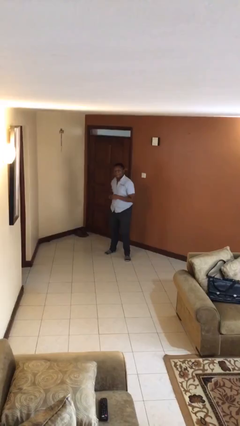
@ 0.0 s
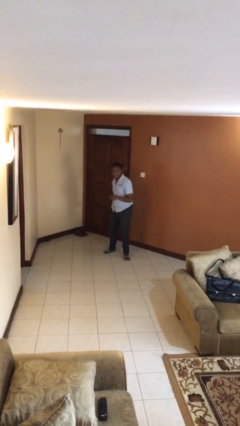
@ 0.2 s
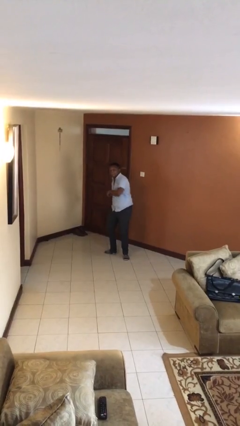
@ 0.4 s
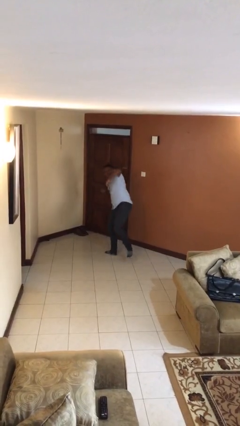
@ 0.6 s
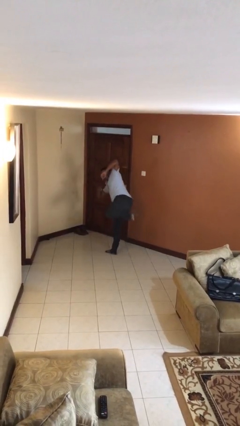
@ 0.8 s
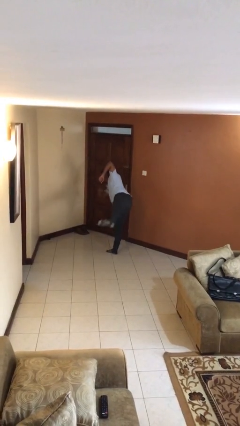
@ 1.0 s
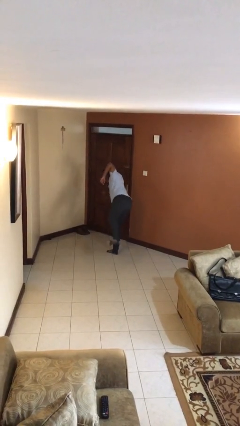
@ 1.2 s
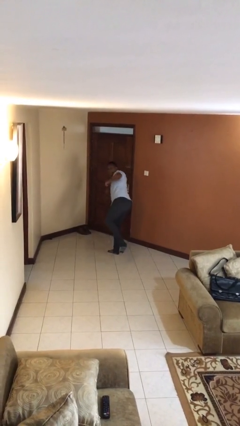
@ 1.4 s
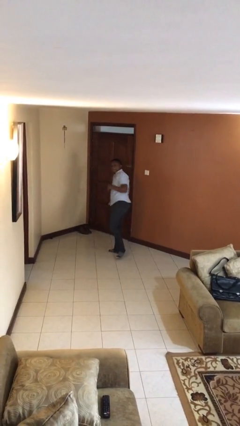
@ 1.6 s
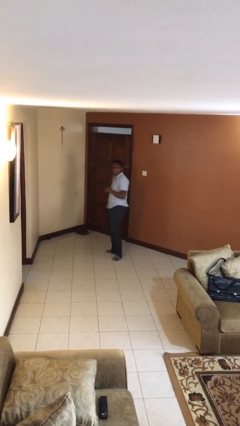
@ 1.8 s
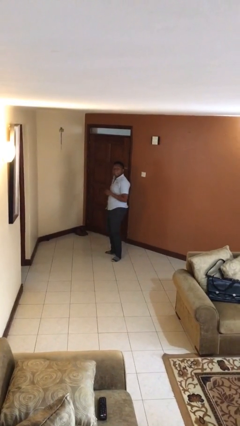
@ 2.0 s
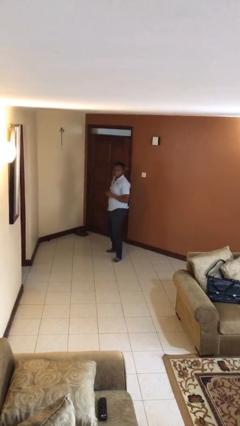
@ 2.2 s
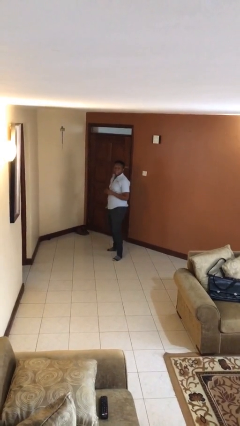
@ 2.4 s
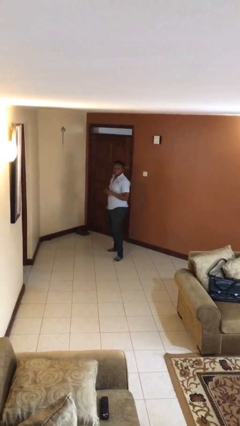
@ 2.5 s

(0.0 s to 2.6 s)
person karate kicks

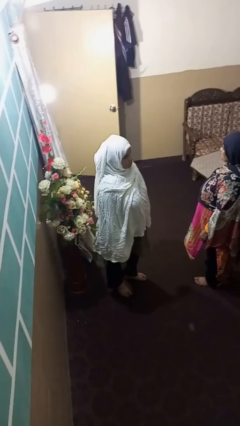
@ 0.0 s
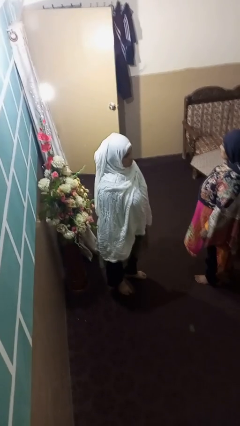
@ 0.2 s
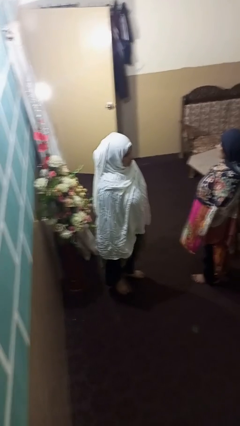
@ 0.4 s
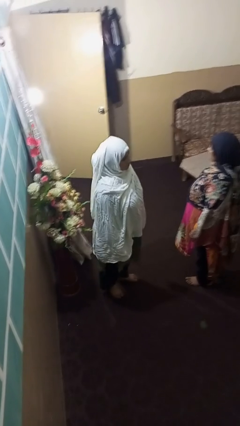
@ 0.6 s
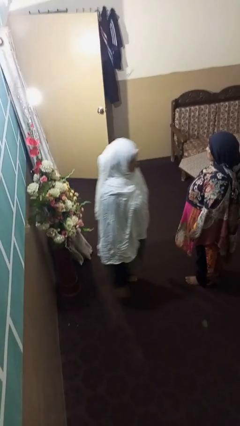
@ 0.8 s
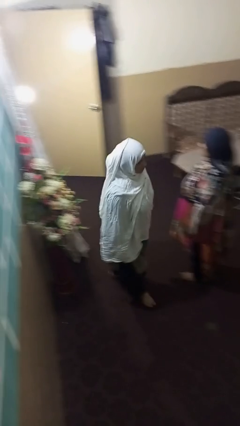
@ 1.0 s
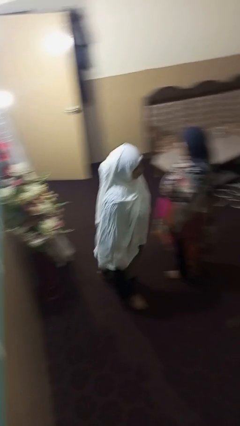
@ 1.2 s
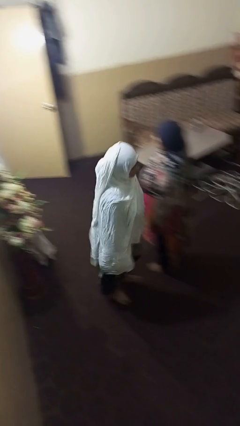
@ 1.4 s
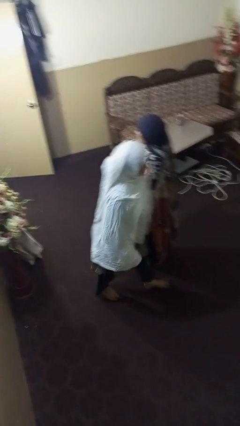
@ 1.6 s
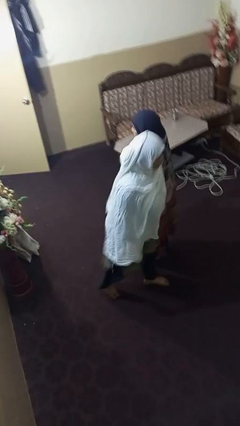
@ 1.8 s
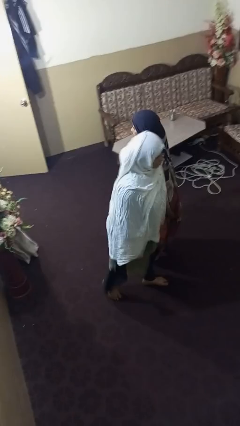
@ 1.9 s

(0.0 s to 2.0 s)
person shoves person

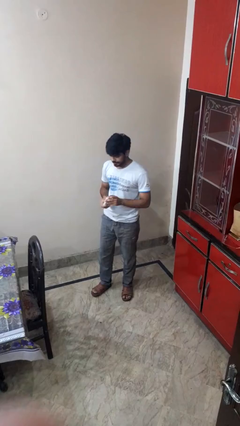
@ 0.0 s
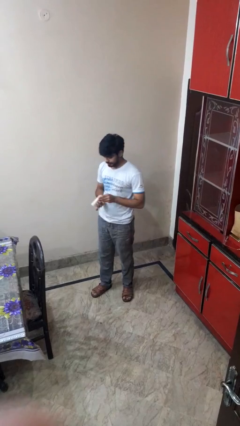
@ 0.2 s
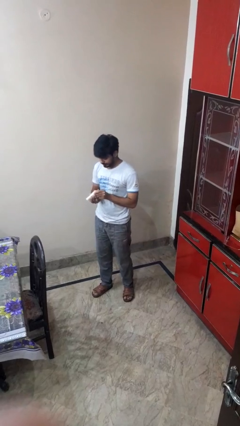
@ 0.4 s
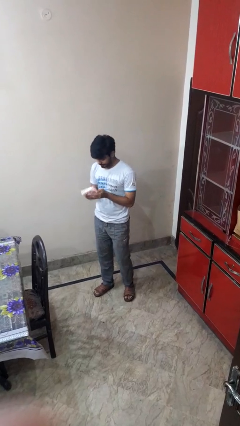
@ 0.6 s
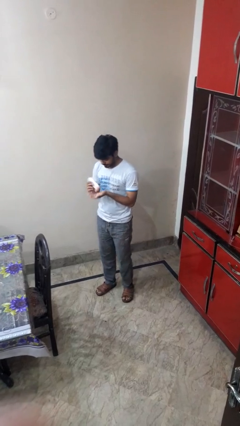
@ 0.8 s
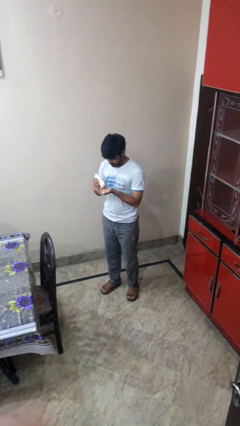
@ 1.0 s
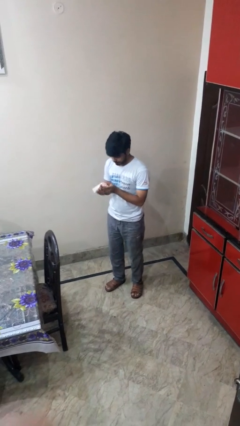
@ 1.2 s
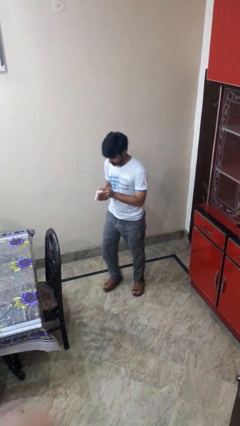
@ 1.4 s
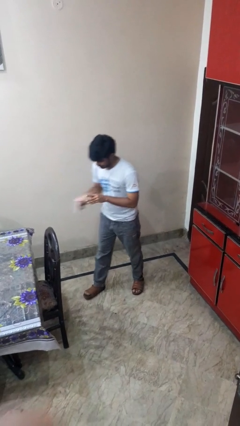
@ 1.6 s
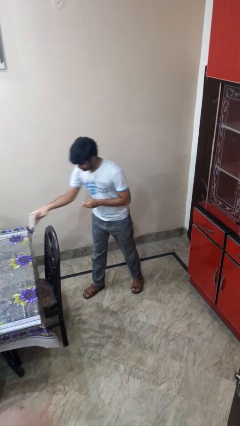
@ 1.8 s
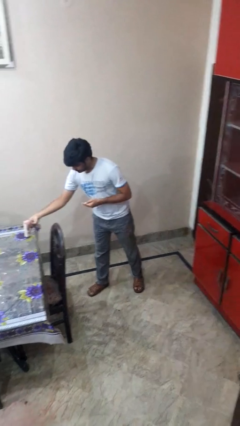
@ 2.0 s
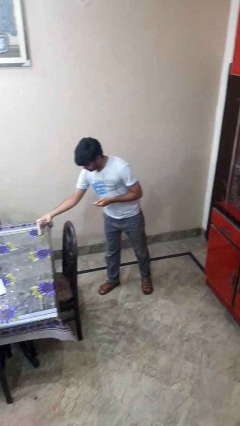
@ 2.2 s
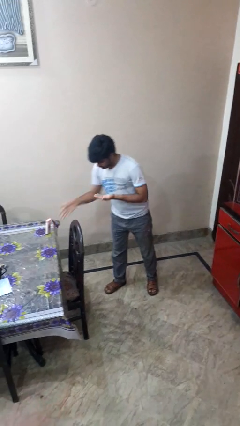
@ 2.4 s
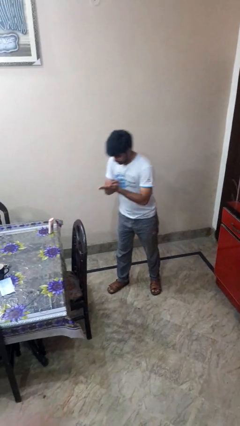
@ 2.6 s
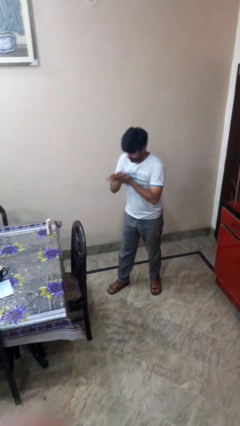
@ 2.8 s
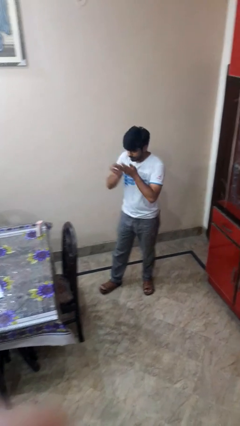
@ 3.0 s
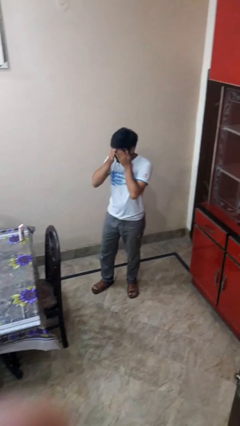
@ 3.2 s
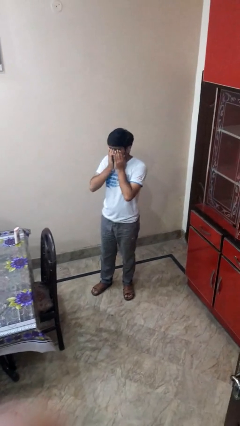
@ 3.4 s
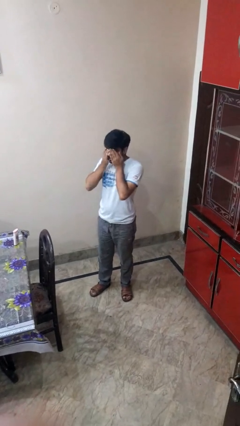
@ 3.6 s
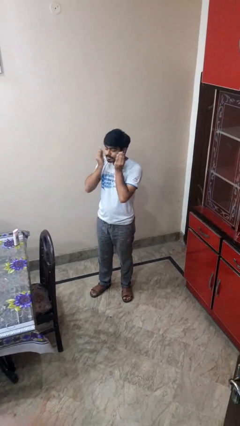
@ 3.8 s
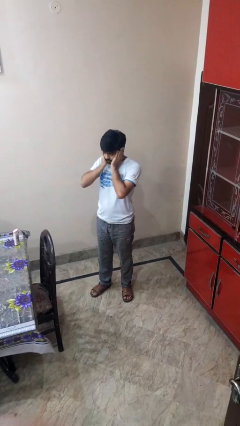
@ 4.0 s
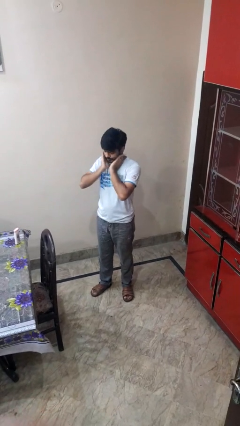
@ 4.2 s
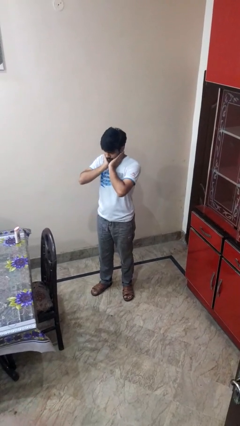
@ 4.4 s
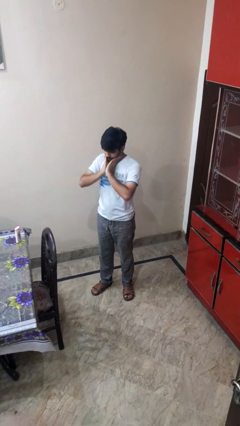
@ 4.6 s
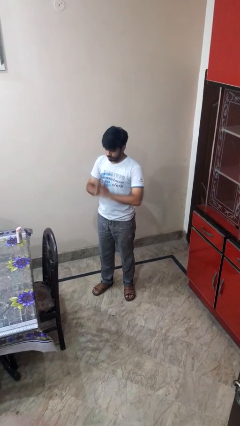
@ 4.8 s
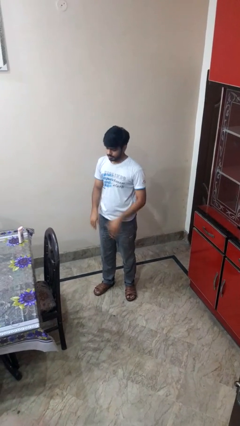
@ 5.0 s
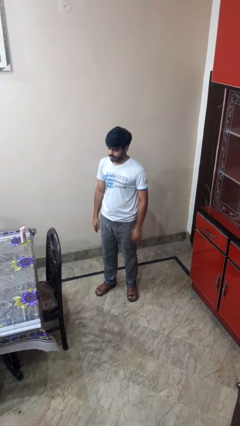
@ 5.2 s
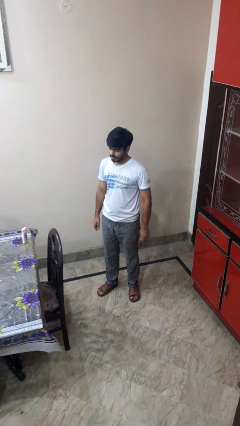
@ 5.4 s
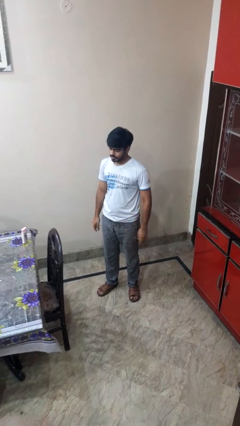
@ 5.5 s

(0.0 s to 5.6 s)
person applies facial moisturizer

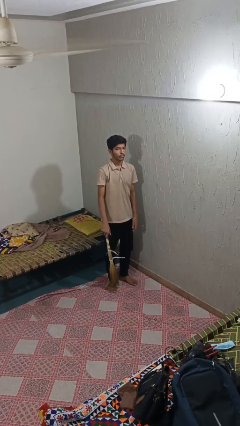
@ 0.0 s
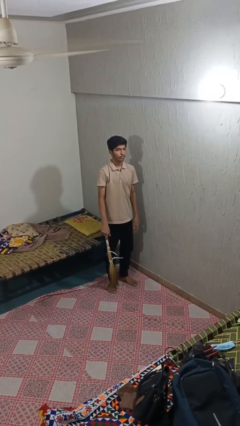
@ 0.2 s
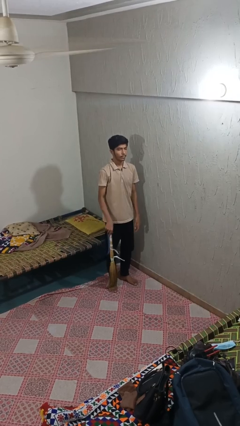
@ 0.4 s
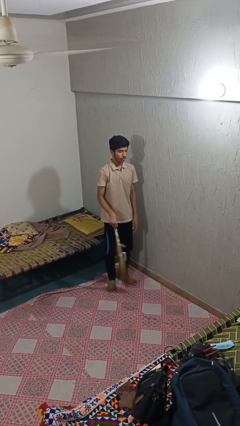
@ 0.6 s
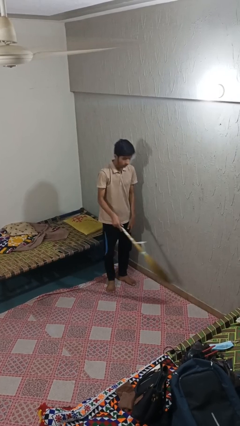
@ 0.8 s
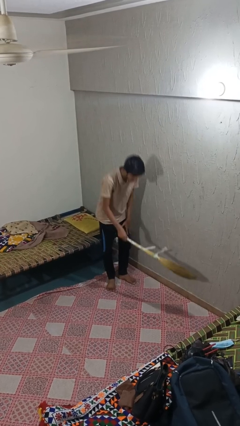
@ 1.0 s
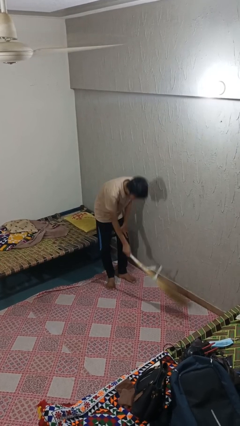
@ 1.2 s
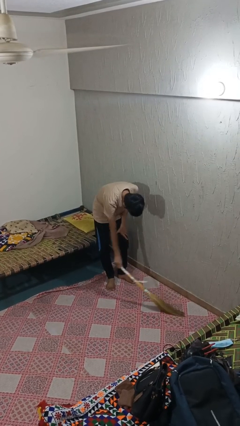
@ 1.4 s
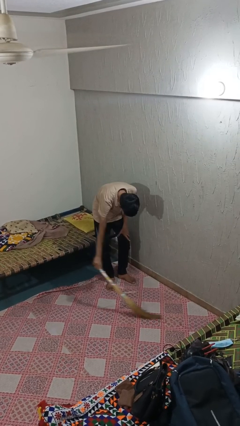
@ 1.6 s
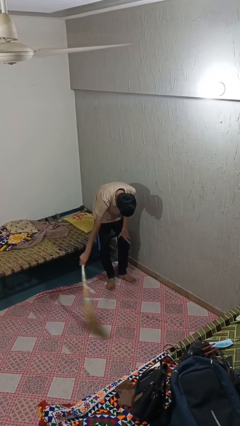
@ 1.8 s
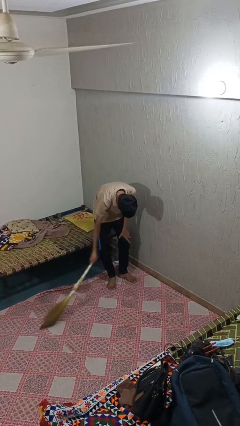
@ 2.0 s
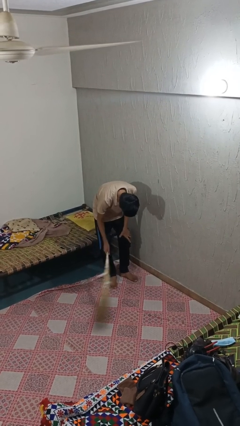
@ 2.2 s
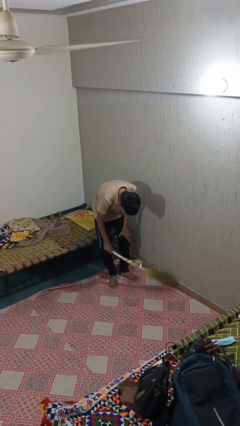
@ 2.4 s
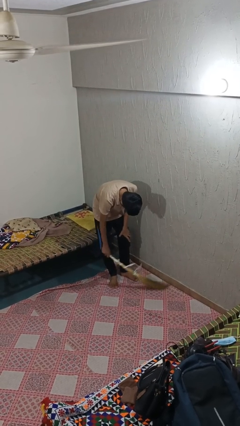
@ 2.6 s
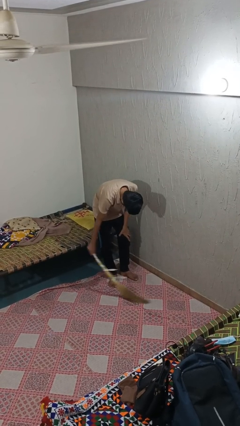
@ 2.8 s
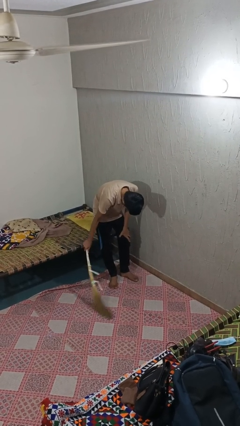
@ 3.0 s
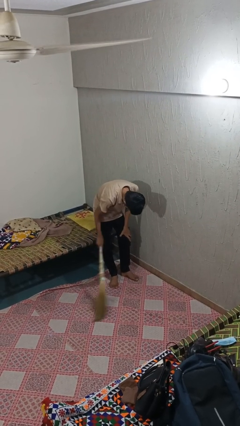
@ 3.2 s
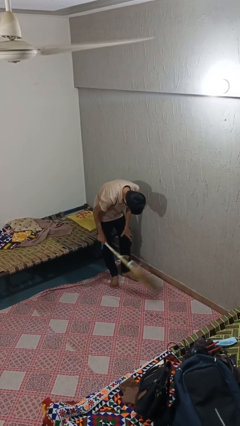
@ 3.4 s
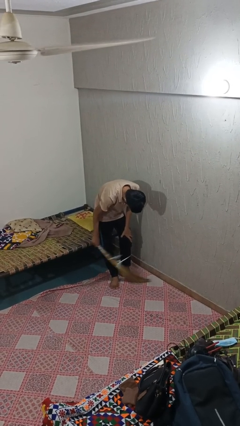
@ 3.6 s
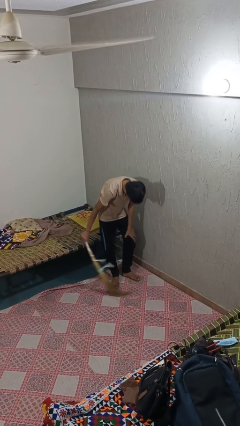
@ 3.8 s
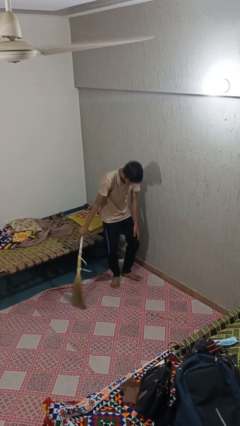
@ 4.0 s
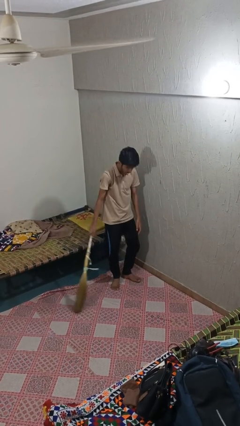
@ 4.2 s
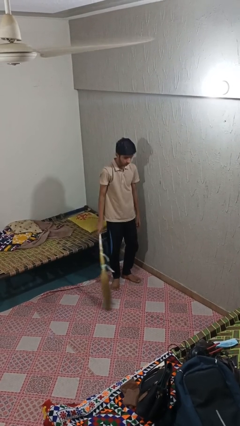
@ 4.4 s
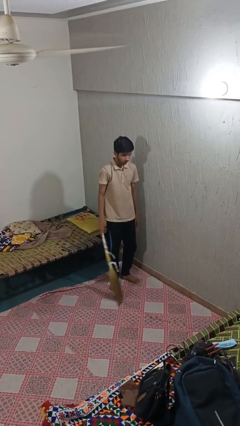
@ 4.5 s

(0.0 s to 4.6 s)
person sweeps floor

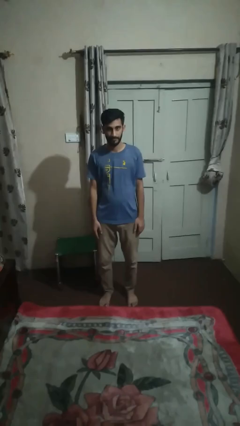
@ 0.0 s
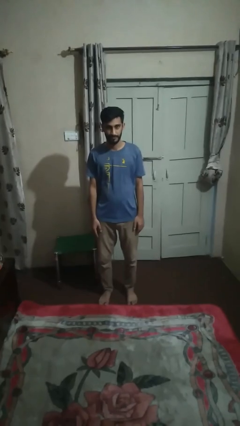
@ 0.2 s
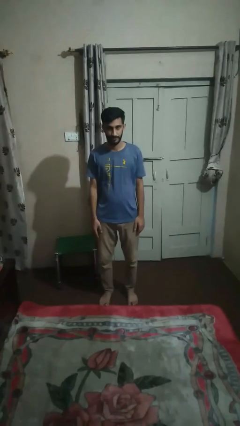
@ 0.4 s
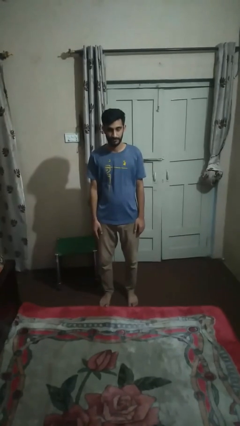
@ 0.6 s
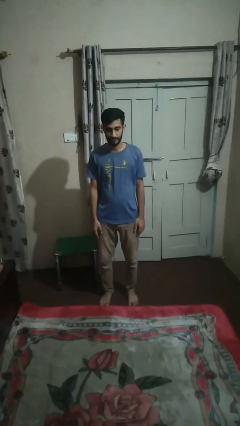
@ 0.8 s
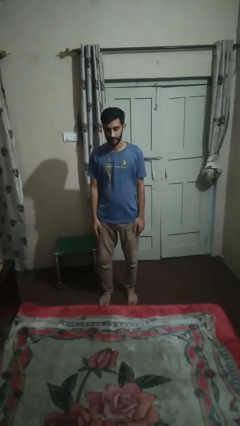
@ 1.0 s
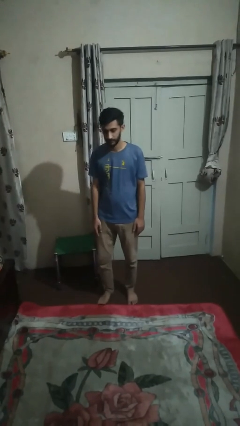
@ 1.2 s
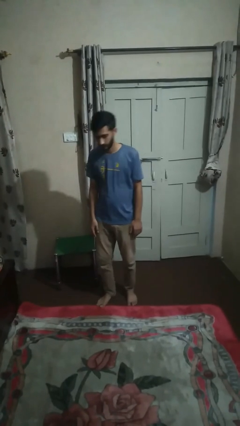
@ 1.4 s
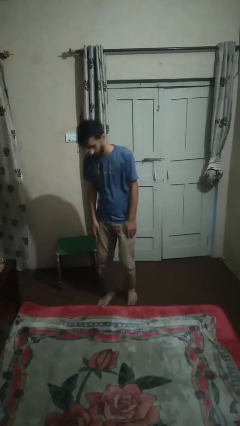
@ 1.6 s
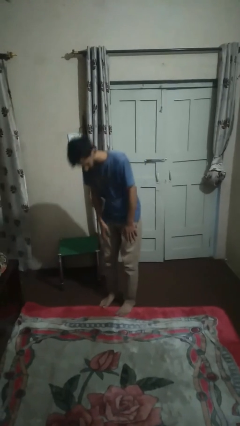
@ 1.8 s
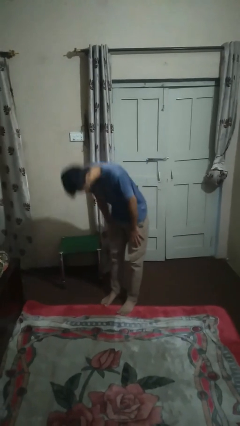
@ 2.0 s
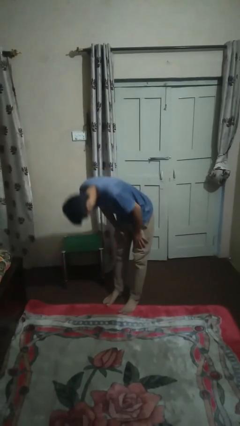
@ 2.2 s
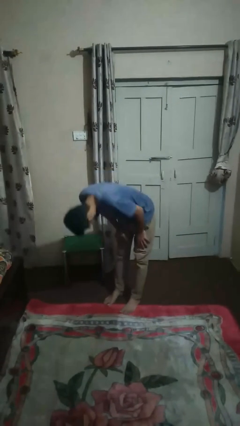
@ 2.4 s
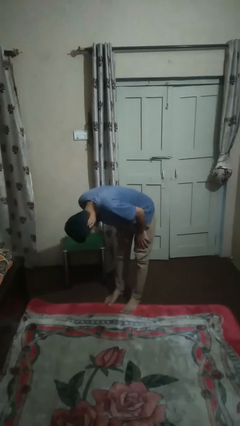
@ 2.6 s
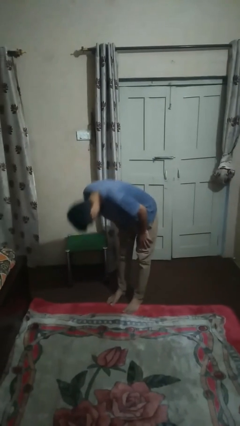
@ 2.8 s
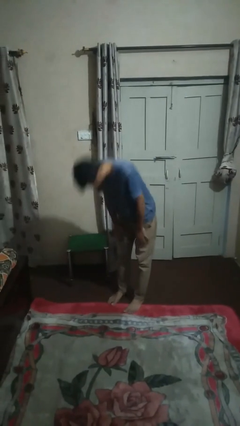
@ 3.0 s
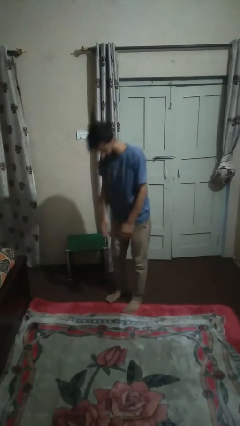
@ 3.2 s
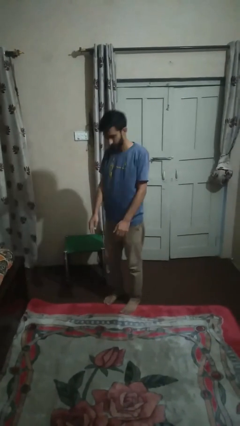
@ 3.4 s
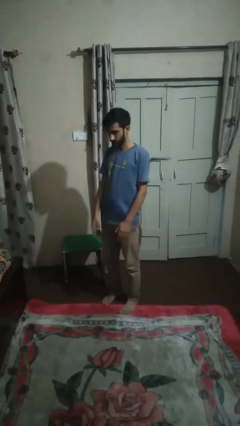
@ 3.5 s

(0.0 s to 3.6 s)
person bows
